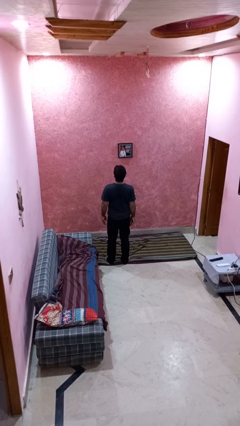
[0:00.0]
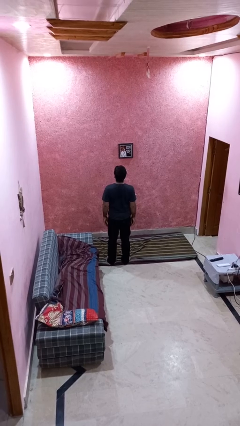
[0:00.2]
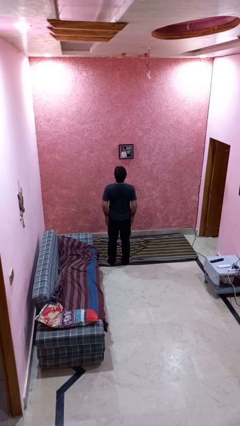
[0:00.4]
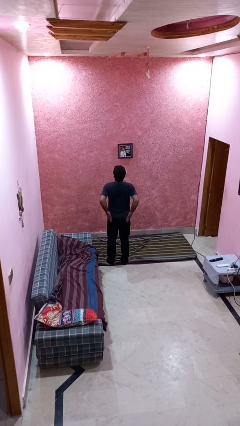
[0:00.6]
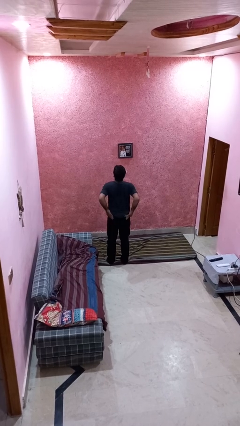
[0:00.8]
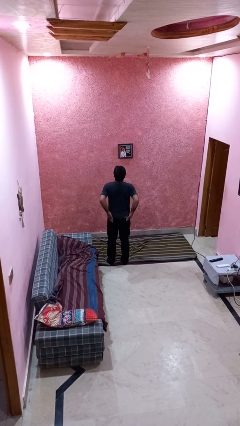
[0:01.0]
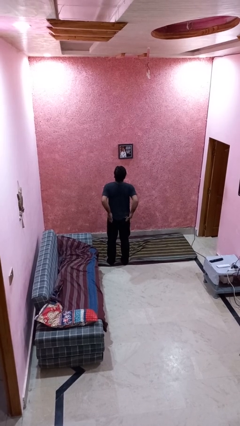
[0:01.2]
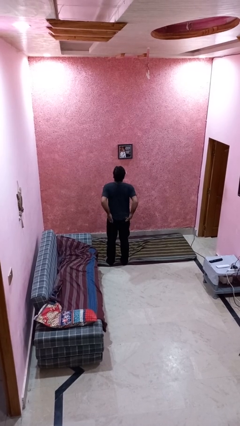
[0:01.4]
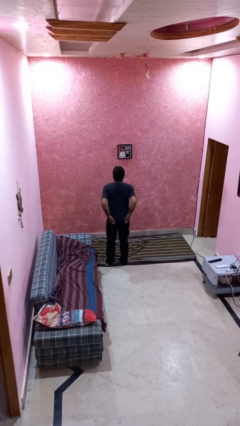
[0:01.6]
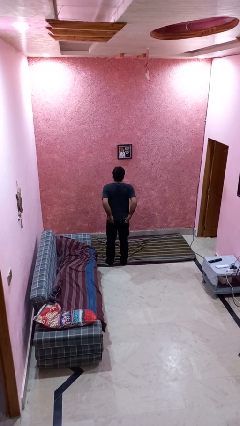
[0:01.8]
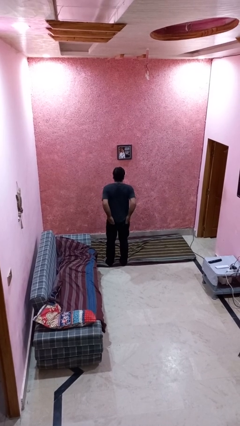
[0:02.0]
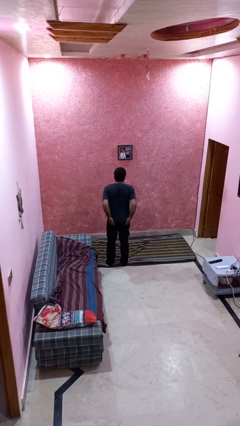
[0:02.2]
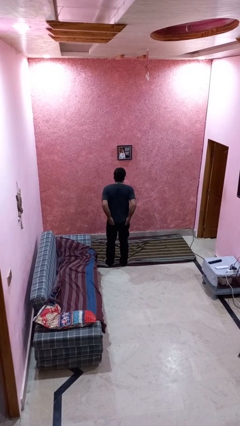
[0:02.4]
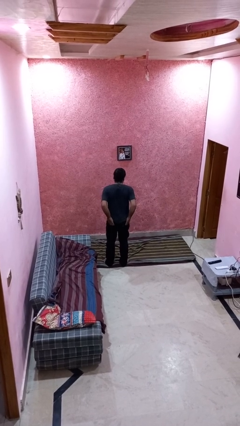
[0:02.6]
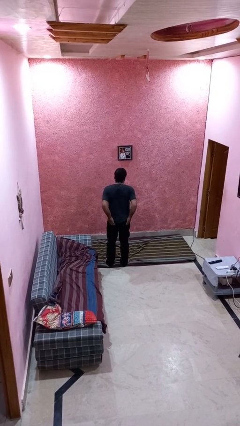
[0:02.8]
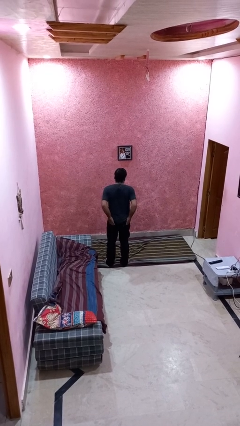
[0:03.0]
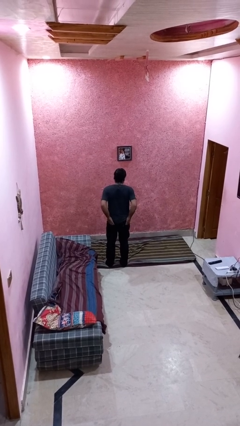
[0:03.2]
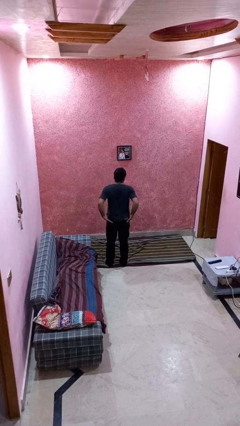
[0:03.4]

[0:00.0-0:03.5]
person puts hands in back pockets

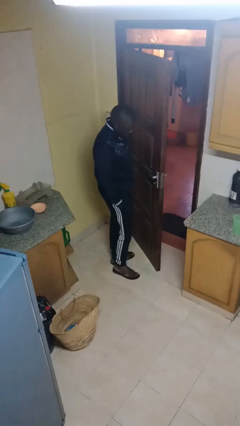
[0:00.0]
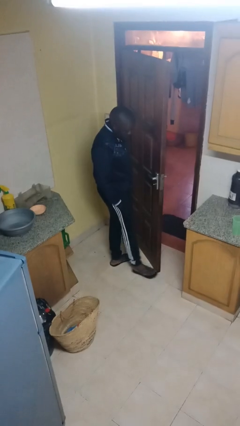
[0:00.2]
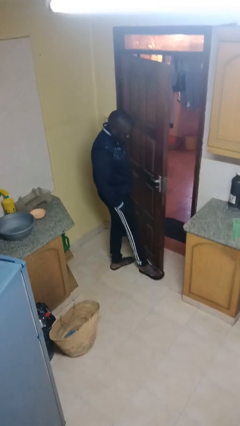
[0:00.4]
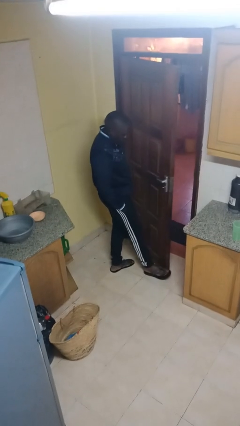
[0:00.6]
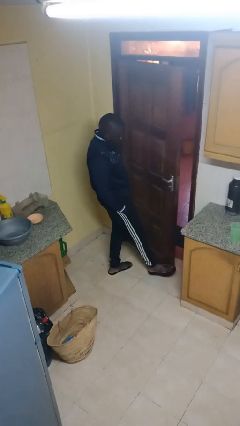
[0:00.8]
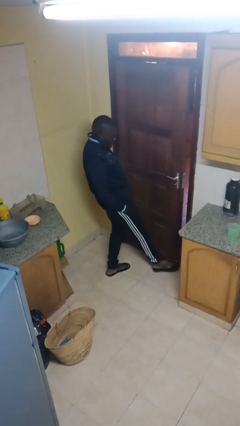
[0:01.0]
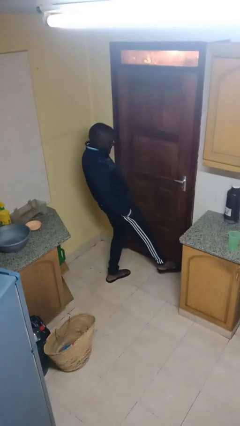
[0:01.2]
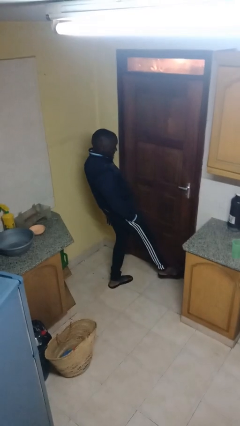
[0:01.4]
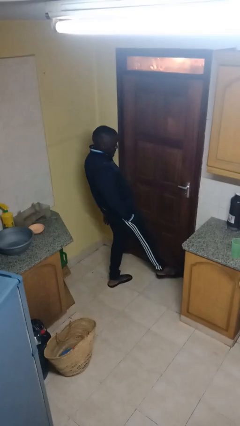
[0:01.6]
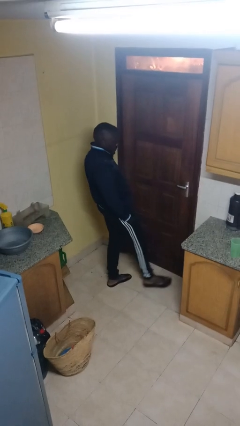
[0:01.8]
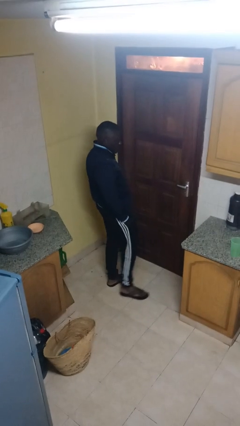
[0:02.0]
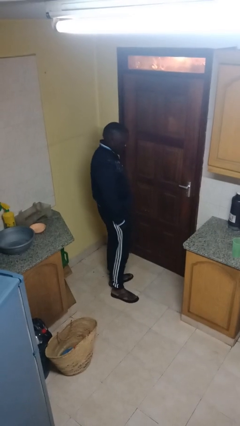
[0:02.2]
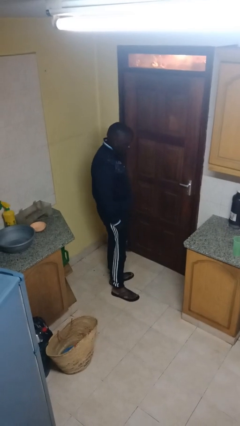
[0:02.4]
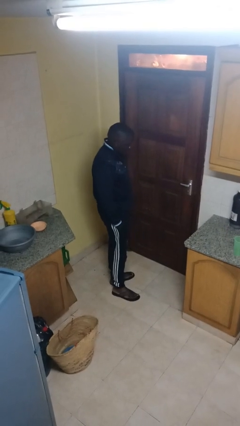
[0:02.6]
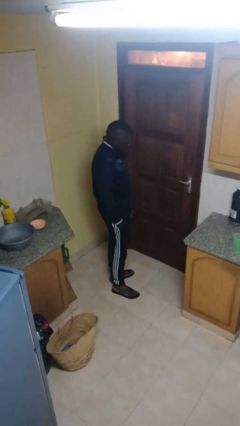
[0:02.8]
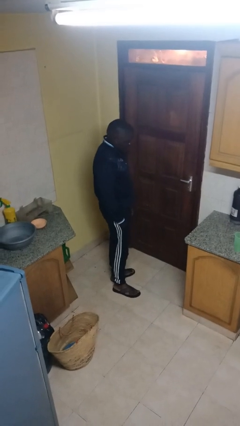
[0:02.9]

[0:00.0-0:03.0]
person closes door with foot

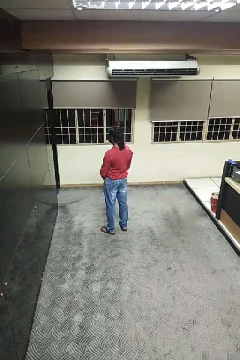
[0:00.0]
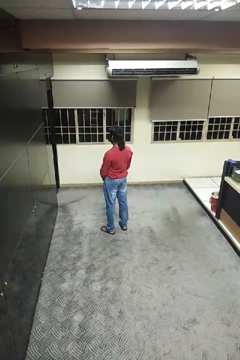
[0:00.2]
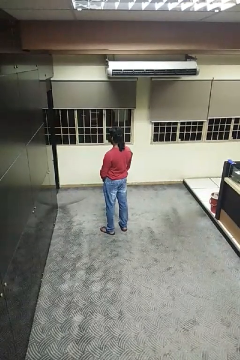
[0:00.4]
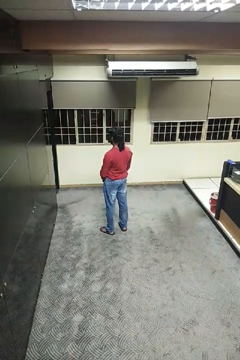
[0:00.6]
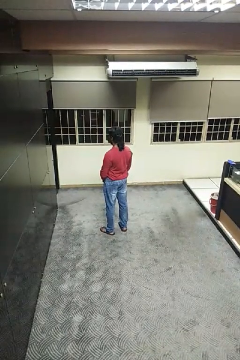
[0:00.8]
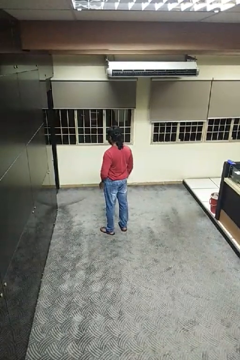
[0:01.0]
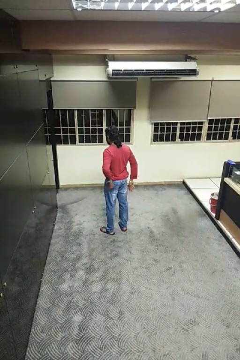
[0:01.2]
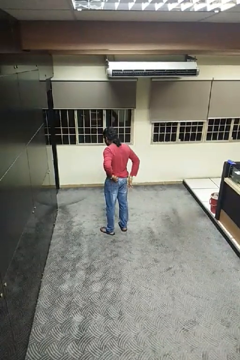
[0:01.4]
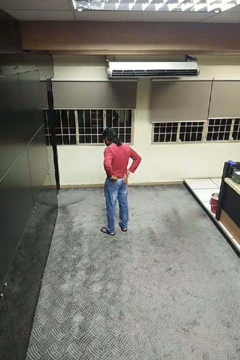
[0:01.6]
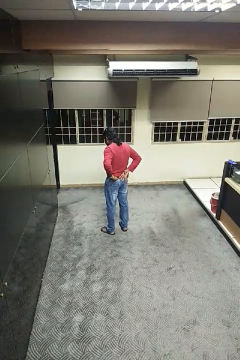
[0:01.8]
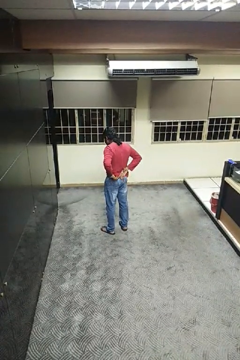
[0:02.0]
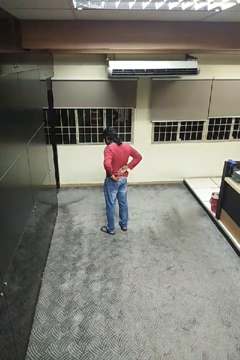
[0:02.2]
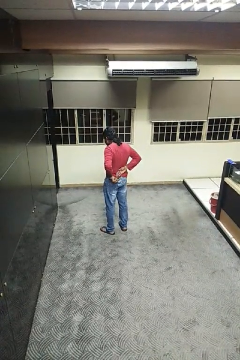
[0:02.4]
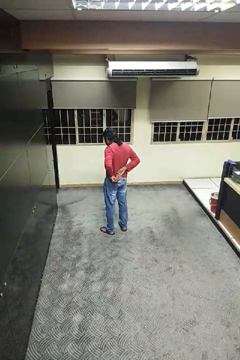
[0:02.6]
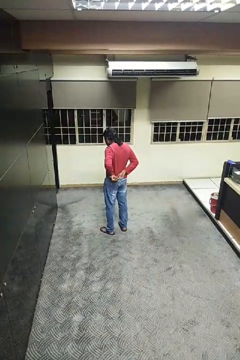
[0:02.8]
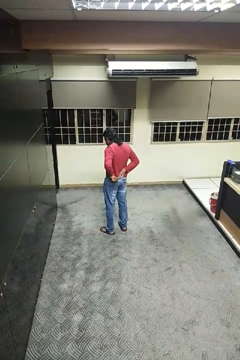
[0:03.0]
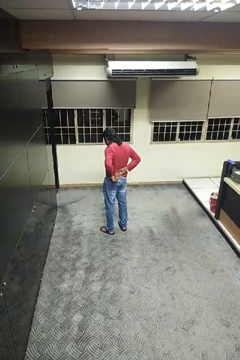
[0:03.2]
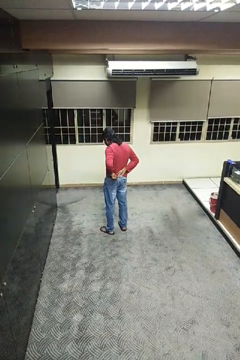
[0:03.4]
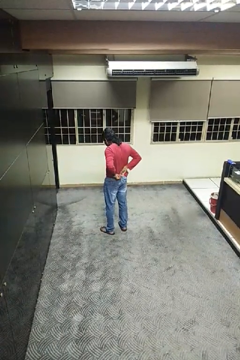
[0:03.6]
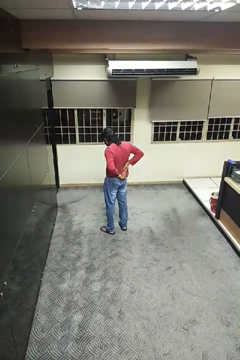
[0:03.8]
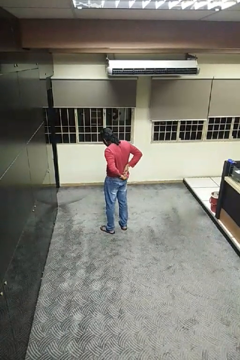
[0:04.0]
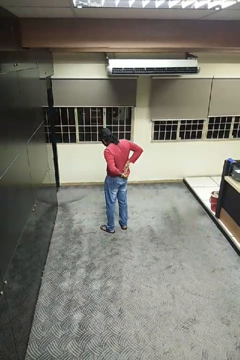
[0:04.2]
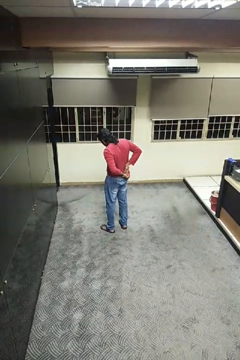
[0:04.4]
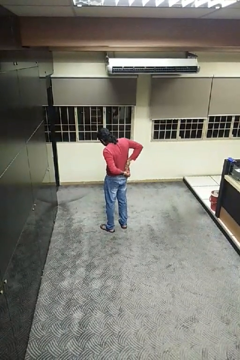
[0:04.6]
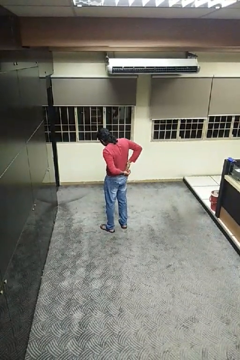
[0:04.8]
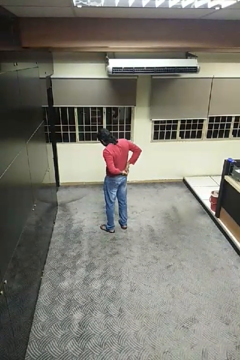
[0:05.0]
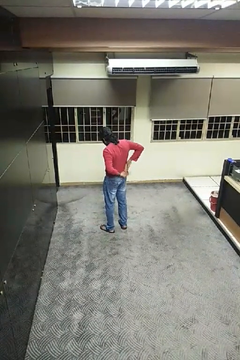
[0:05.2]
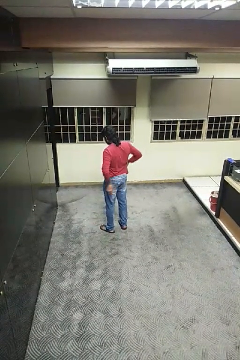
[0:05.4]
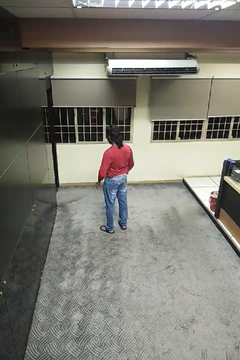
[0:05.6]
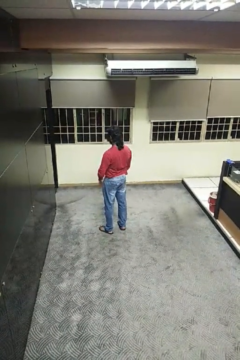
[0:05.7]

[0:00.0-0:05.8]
person tucks in shirt

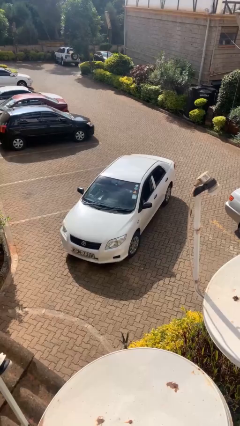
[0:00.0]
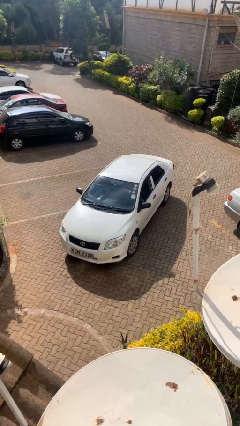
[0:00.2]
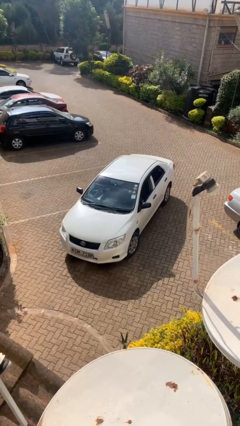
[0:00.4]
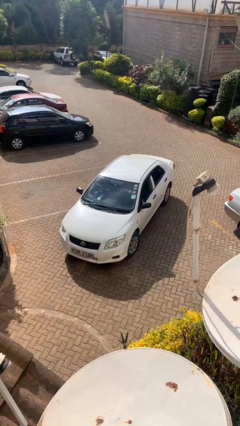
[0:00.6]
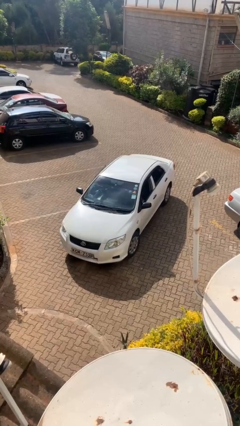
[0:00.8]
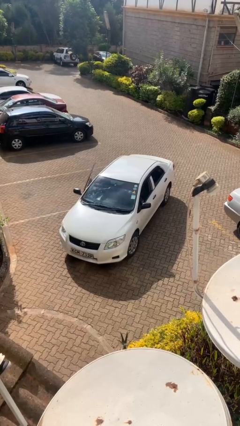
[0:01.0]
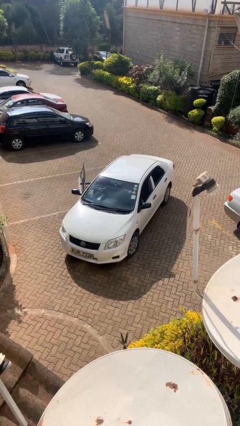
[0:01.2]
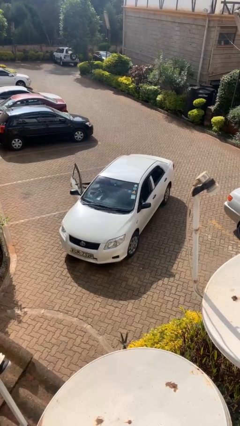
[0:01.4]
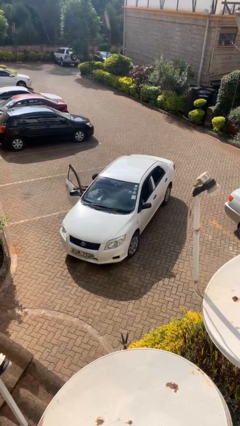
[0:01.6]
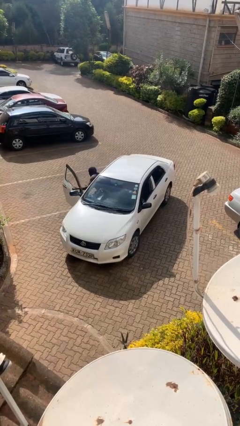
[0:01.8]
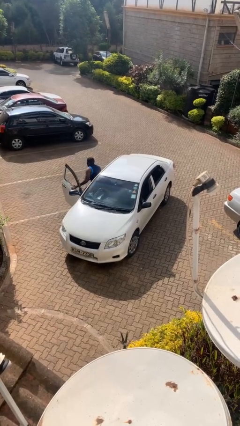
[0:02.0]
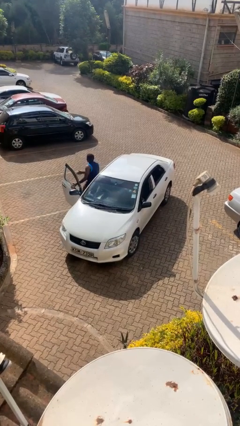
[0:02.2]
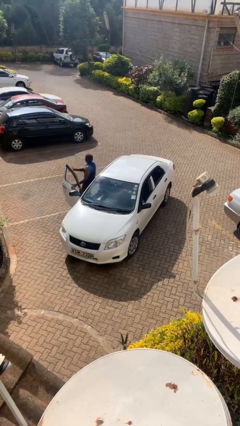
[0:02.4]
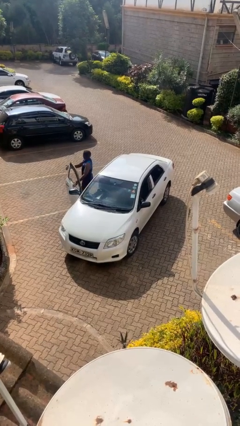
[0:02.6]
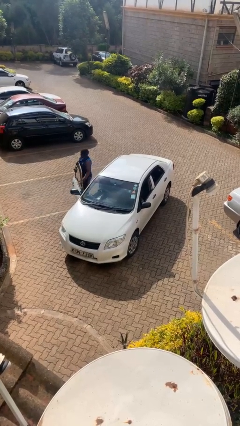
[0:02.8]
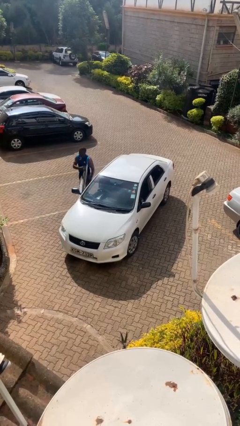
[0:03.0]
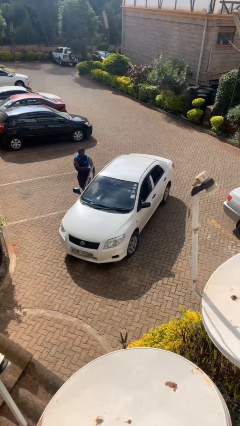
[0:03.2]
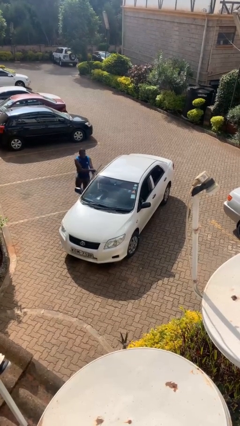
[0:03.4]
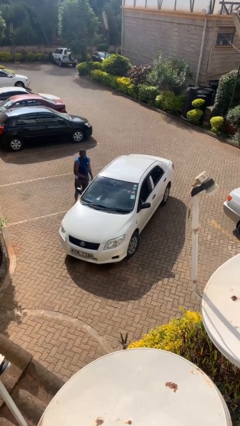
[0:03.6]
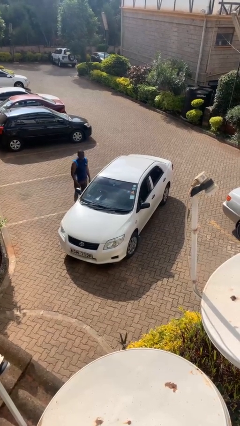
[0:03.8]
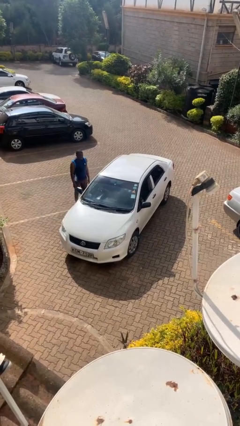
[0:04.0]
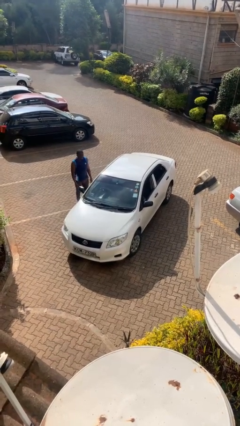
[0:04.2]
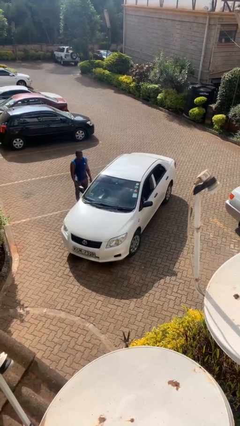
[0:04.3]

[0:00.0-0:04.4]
car drops off person

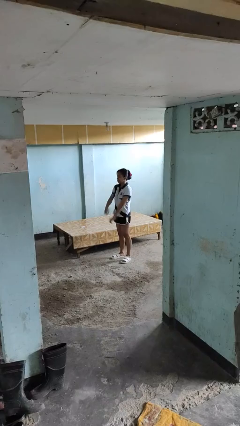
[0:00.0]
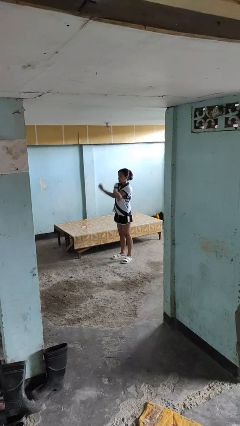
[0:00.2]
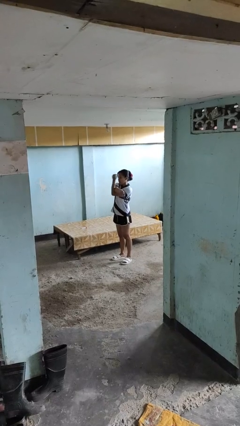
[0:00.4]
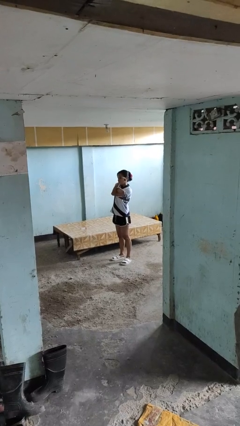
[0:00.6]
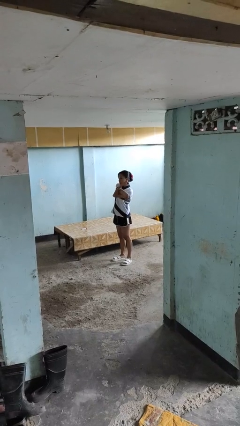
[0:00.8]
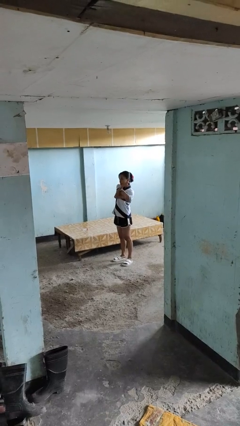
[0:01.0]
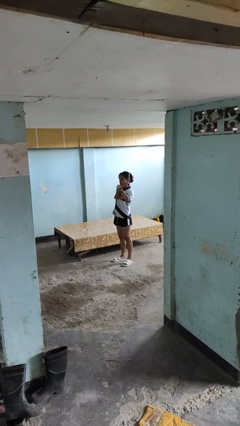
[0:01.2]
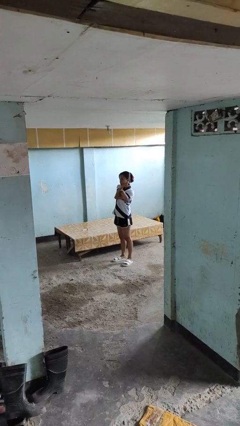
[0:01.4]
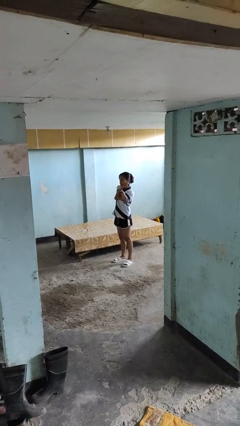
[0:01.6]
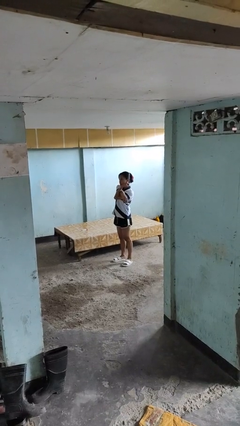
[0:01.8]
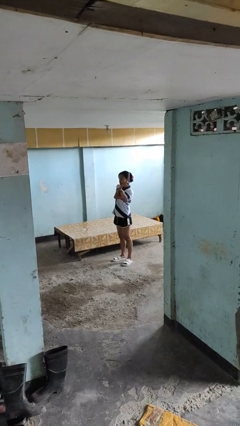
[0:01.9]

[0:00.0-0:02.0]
person crosses arms

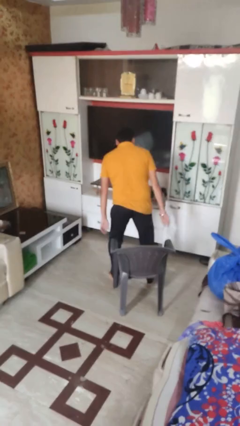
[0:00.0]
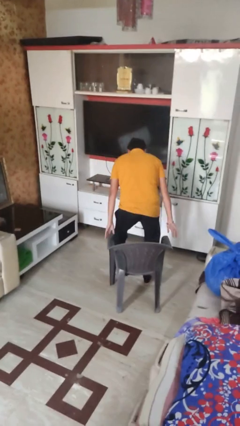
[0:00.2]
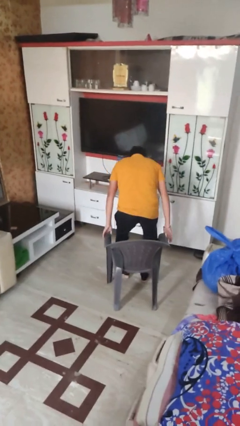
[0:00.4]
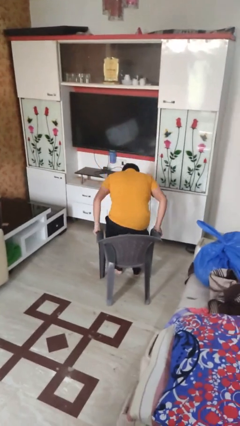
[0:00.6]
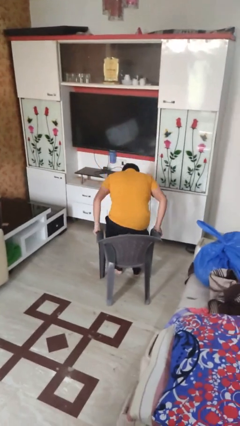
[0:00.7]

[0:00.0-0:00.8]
person sits down
